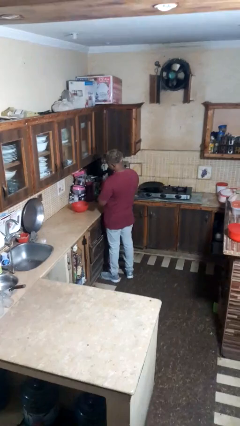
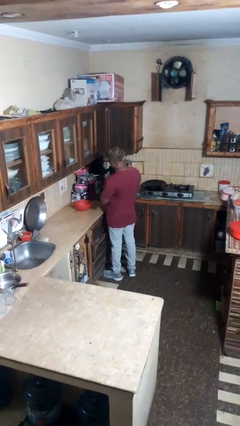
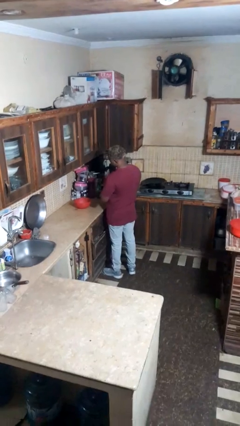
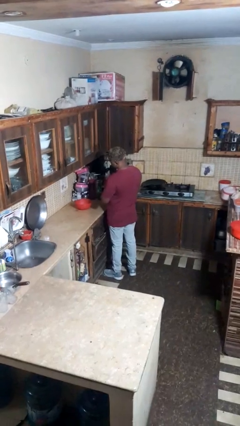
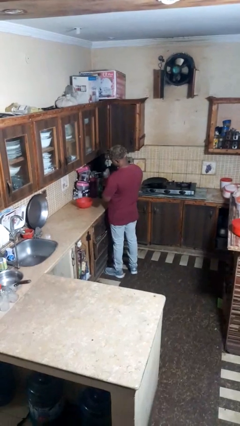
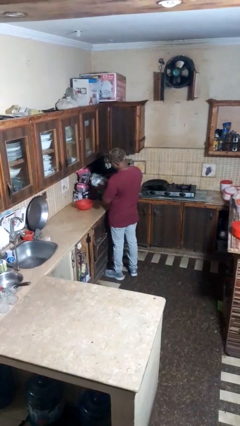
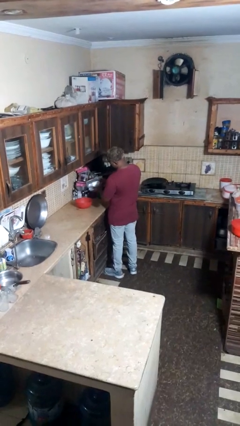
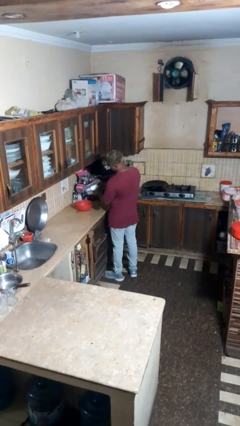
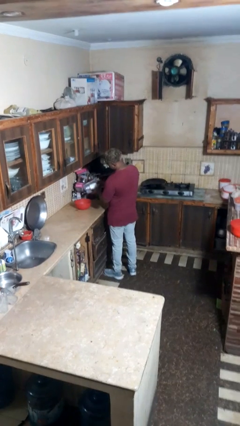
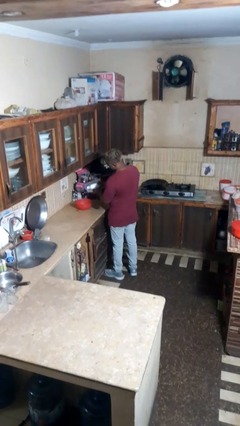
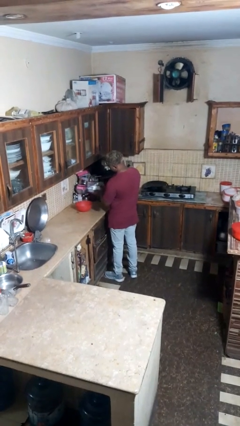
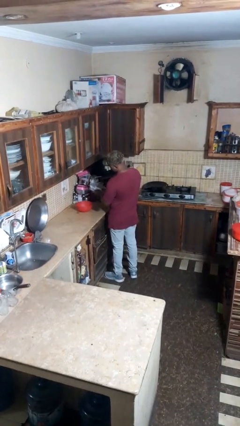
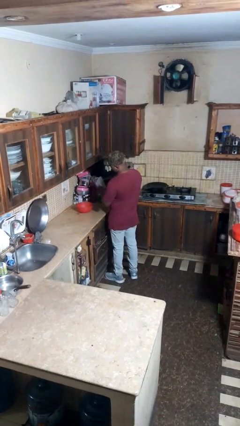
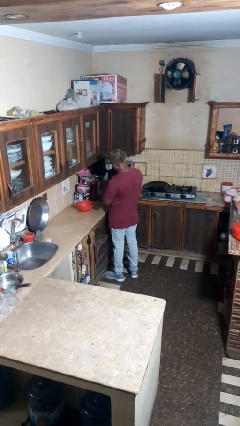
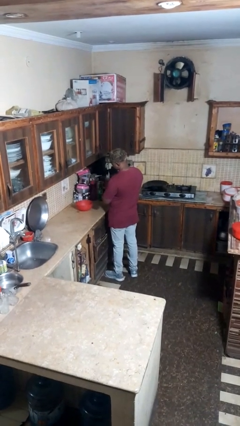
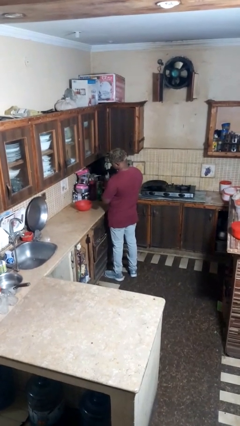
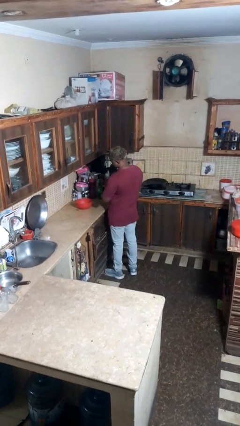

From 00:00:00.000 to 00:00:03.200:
person pours into bowl

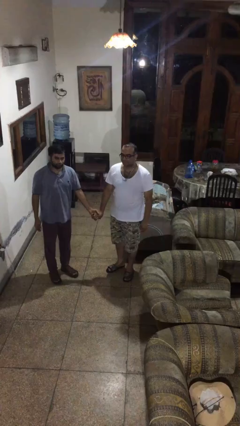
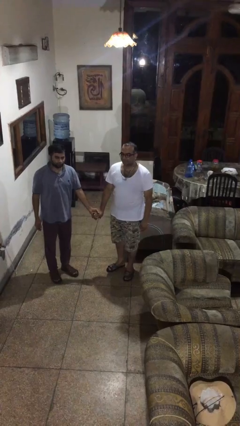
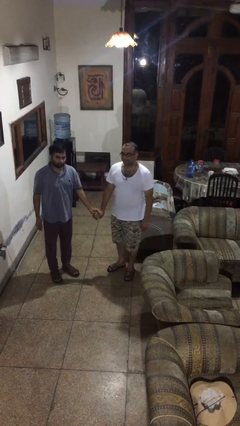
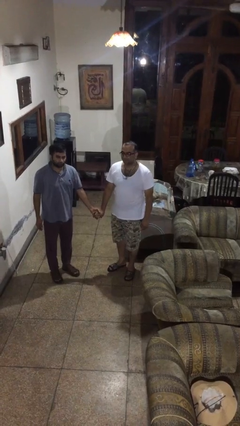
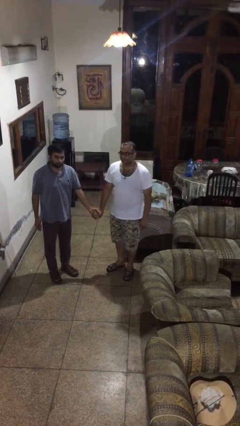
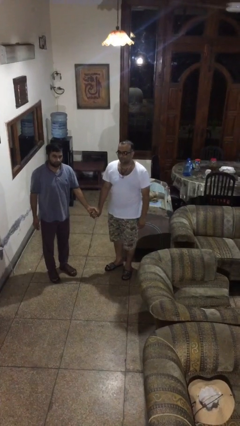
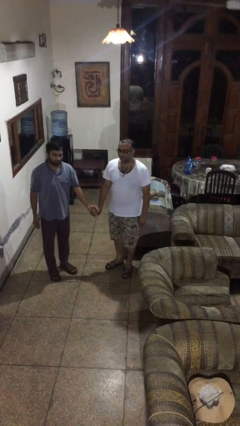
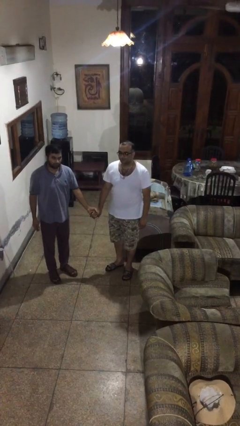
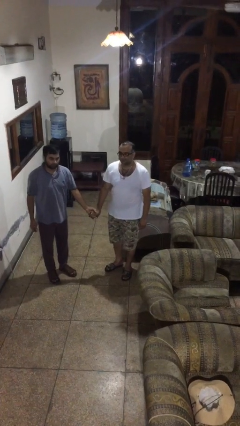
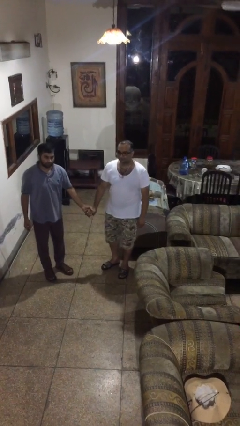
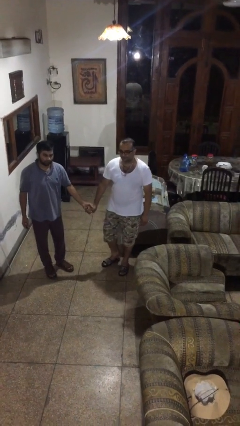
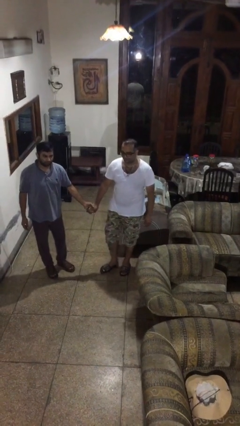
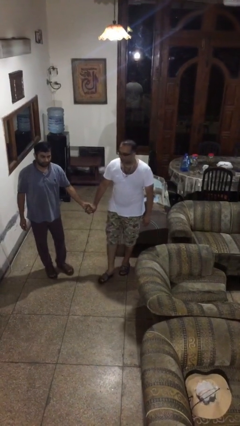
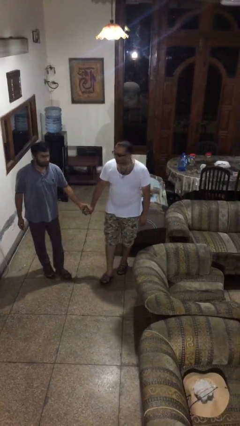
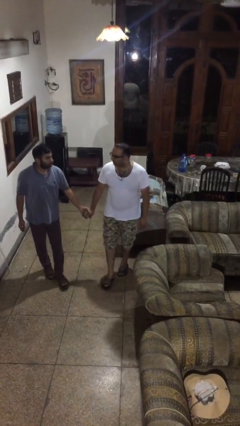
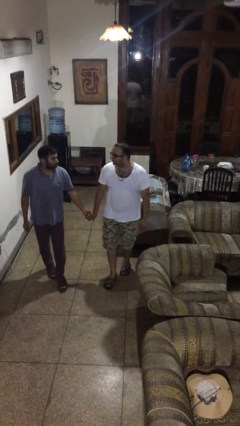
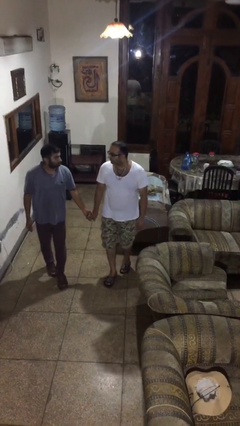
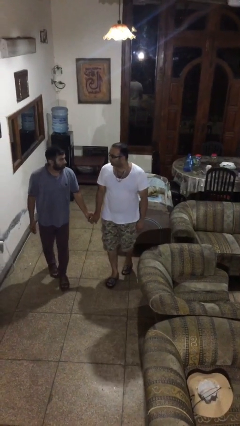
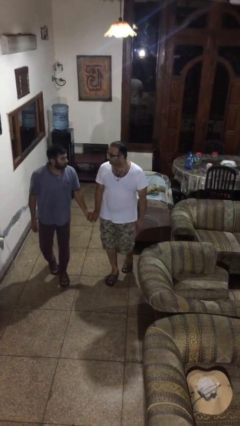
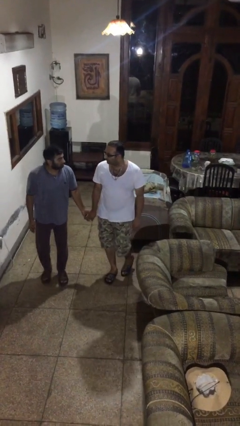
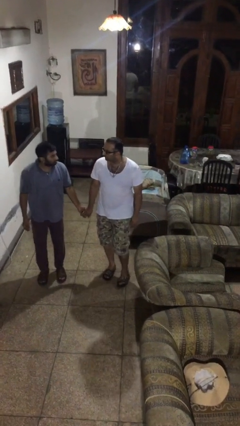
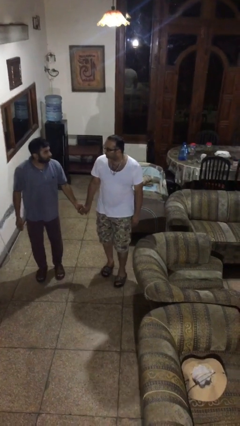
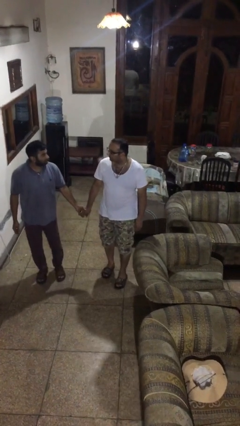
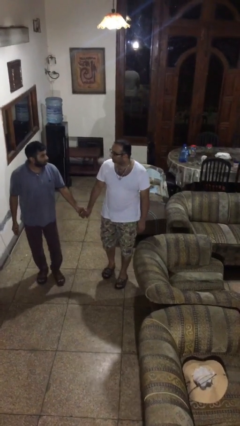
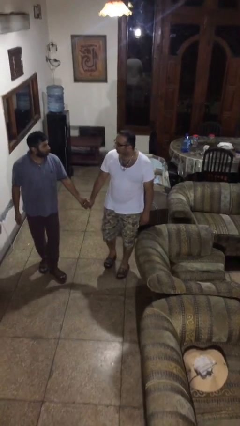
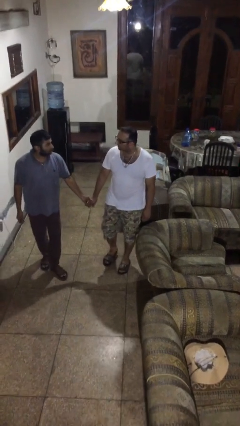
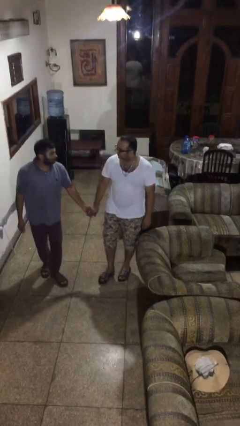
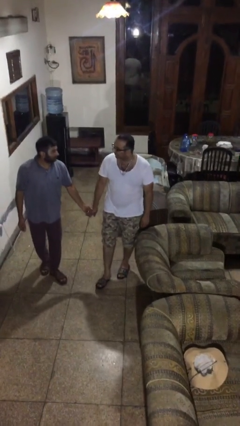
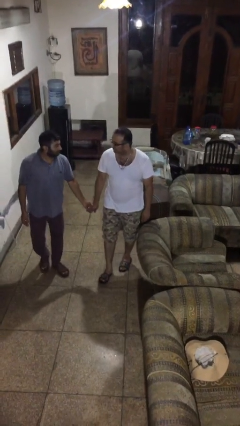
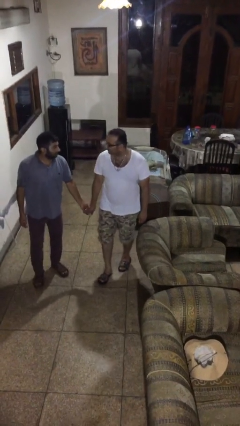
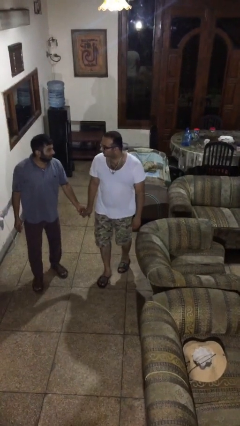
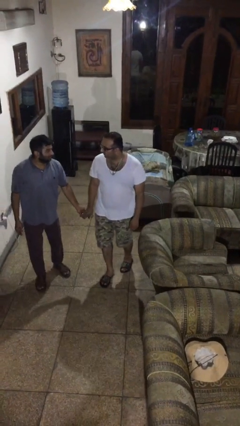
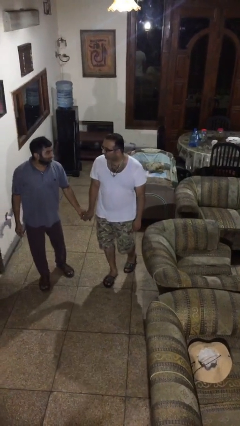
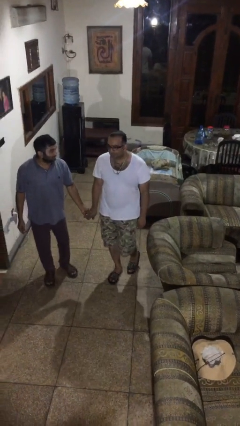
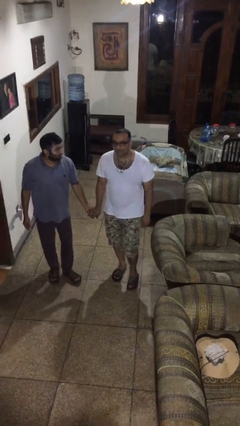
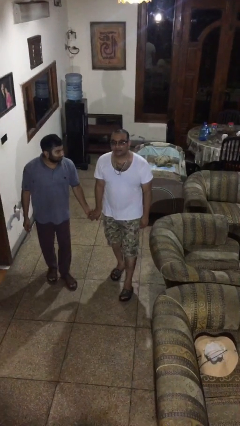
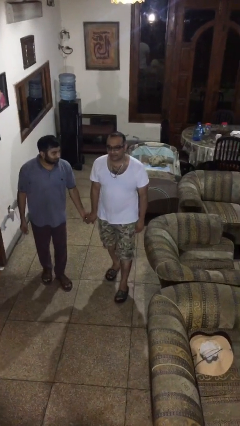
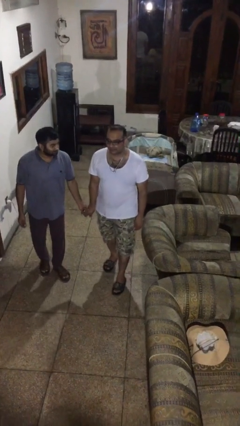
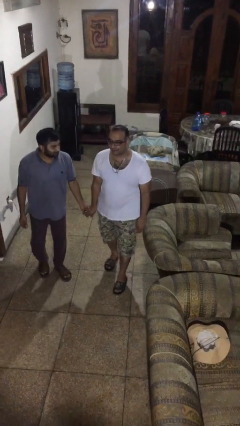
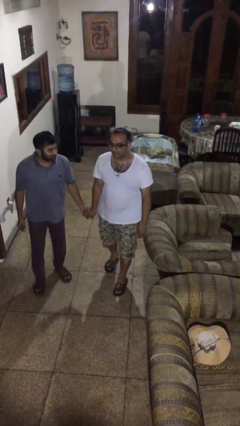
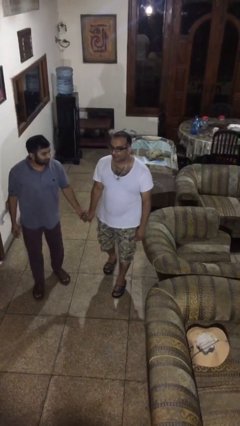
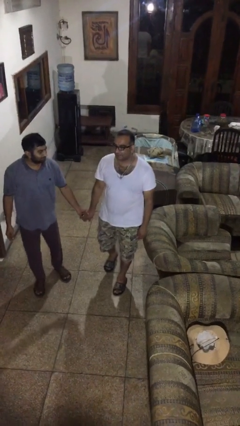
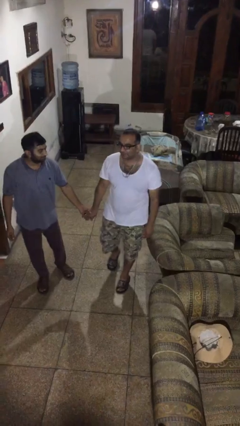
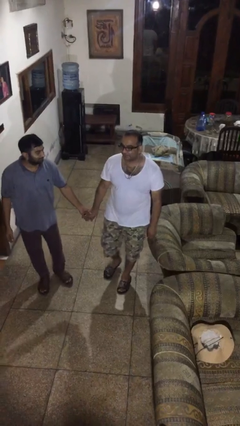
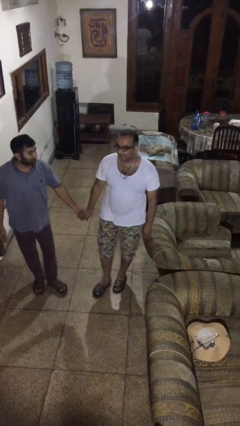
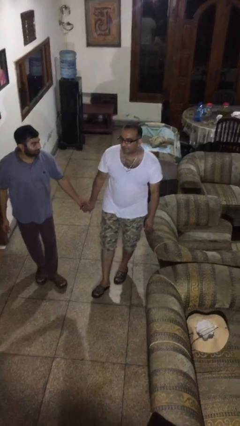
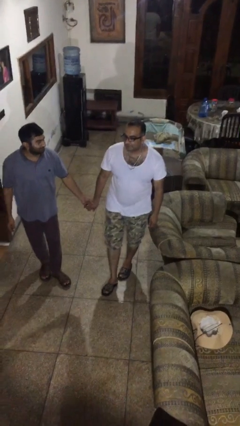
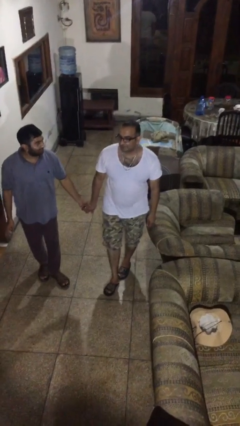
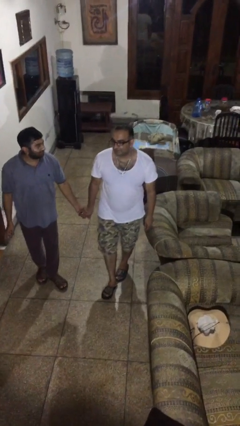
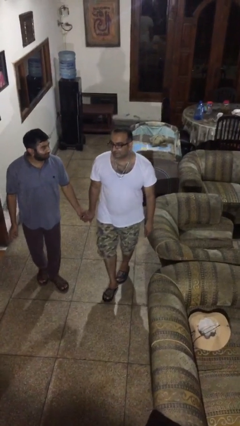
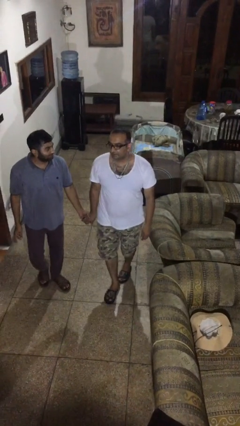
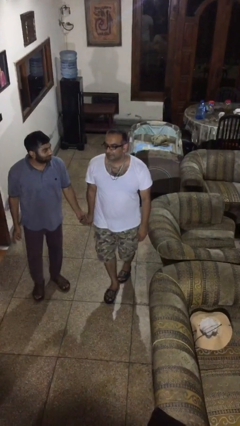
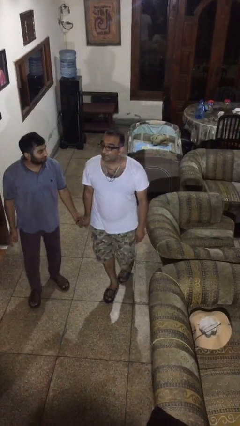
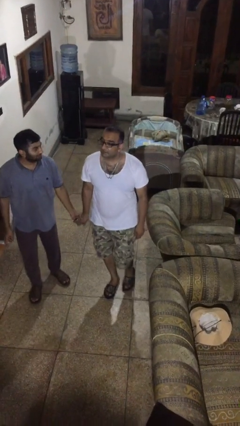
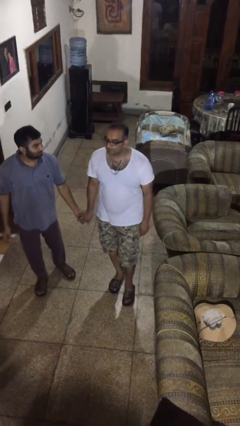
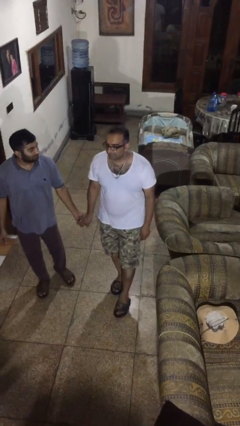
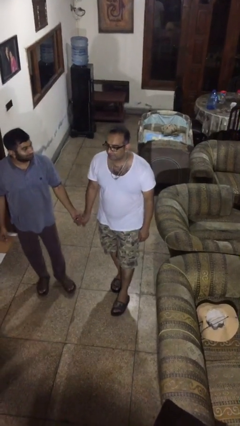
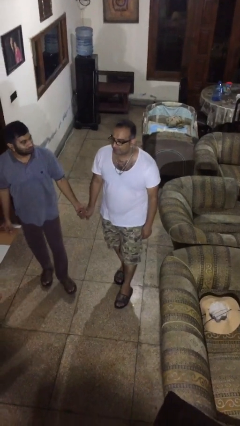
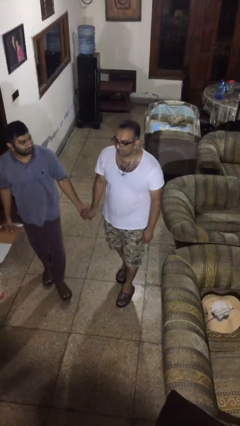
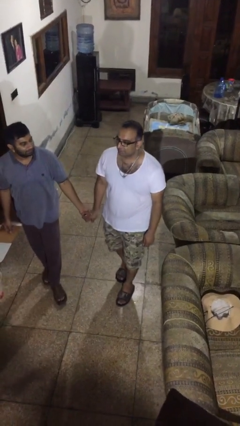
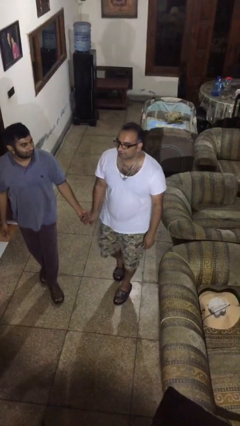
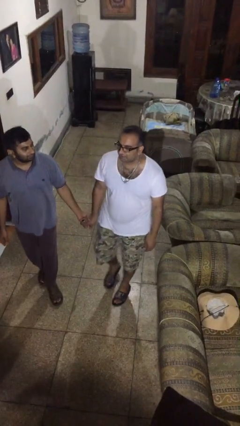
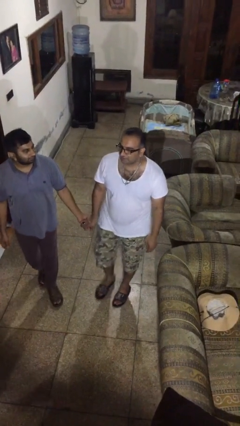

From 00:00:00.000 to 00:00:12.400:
person holds hand

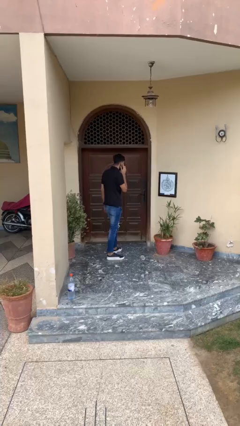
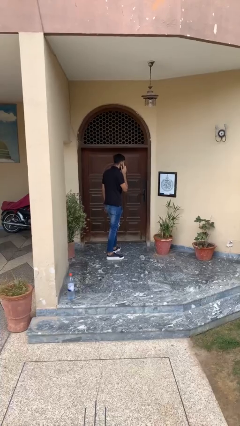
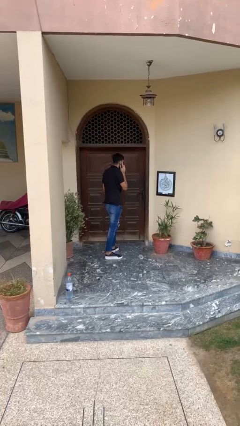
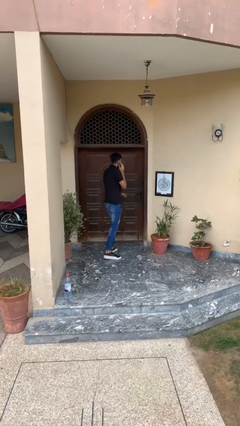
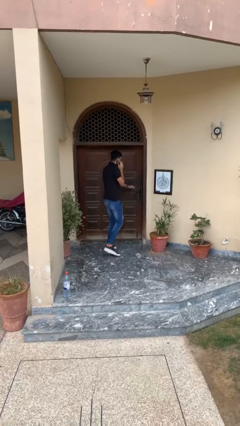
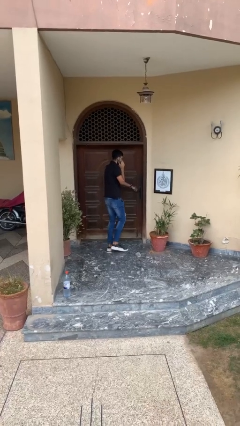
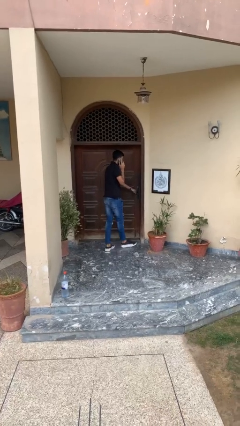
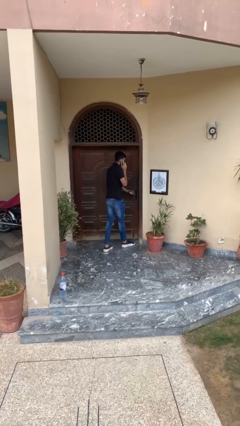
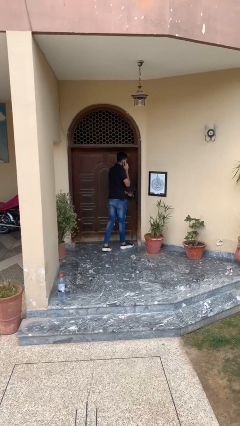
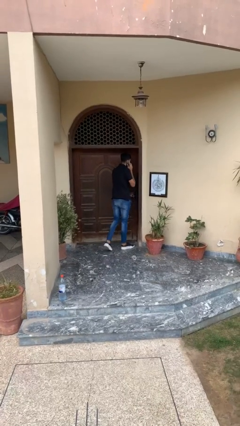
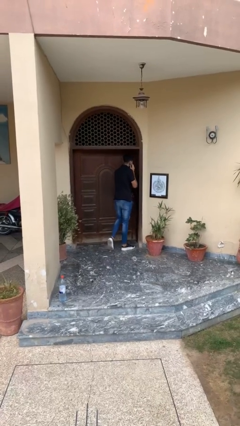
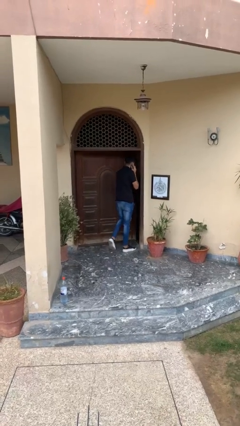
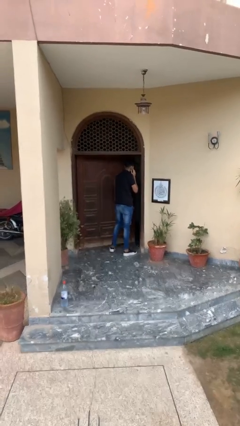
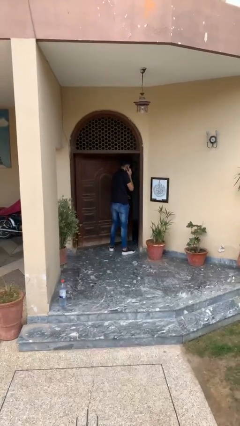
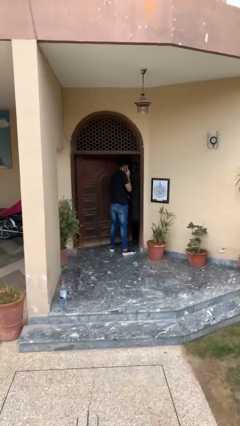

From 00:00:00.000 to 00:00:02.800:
person opens facility door
